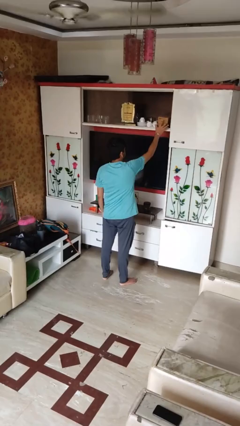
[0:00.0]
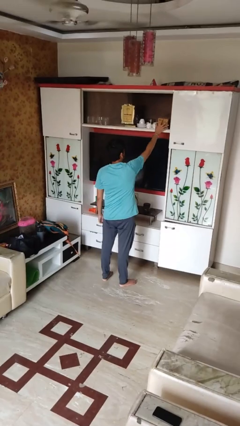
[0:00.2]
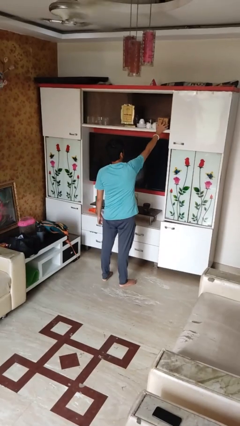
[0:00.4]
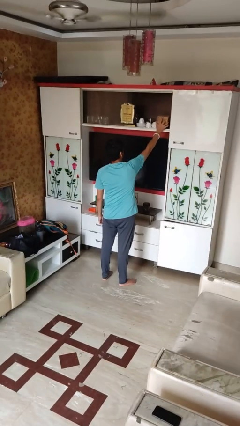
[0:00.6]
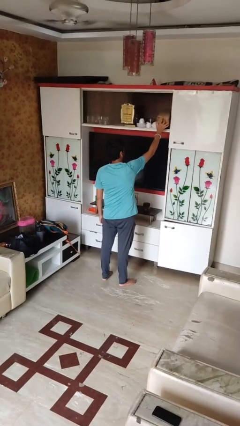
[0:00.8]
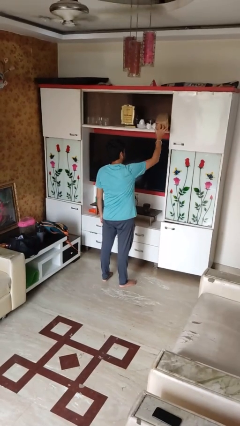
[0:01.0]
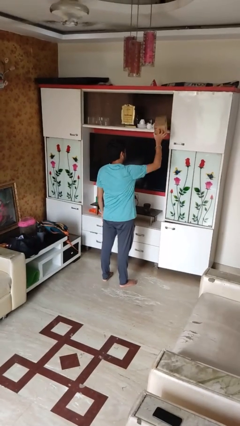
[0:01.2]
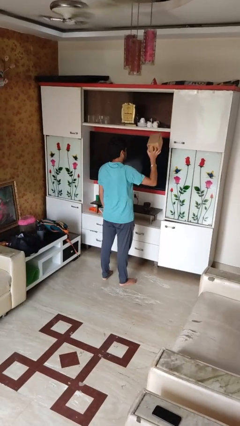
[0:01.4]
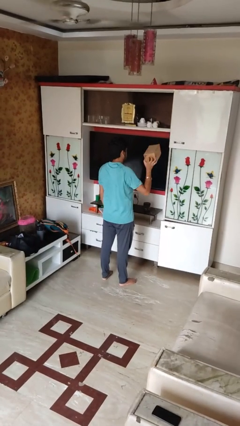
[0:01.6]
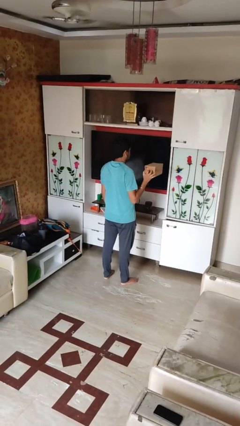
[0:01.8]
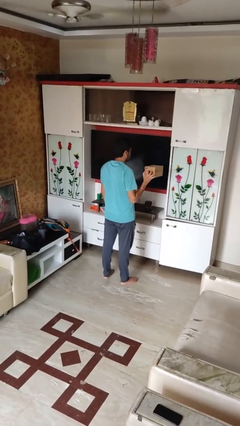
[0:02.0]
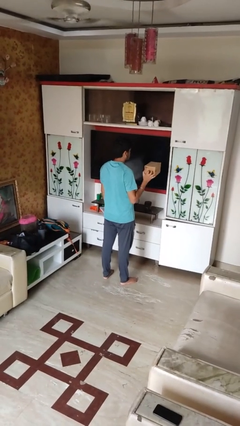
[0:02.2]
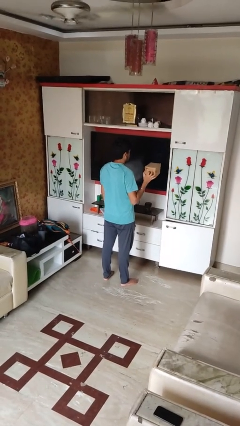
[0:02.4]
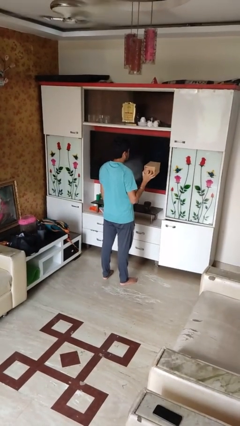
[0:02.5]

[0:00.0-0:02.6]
person picks up object from shelf

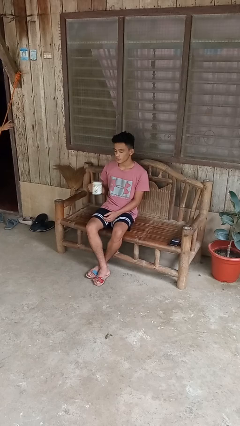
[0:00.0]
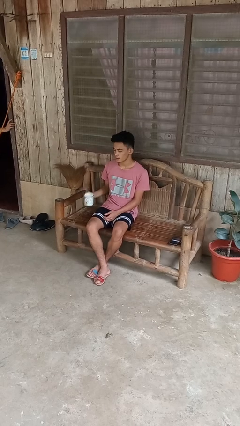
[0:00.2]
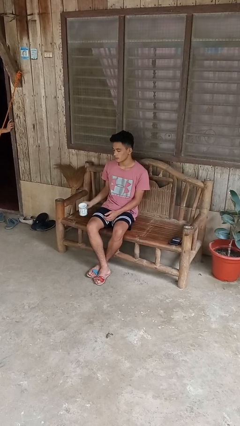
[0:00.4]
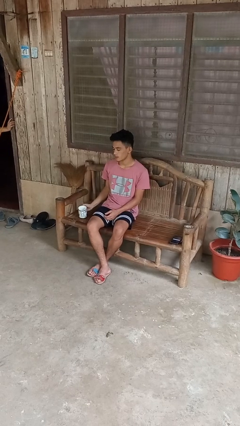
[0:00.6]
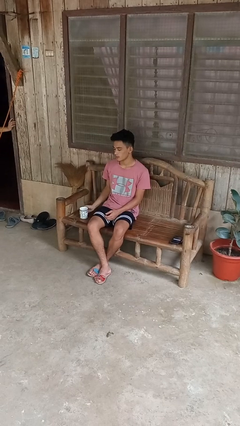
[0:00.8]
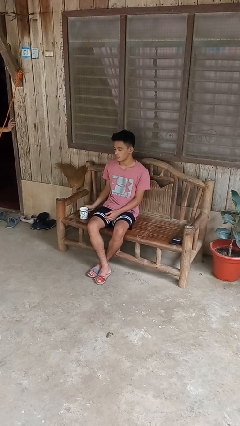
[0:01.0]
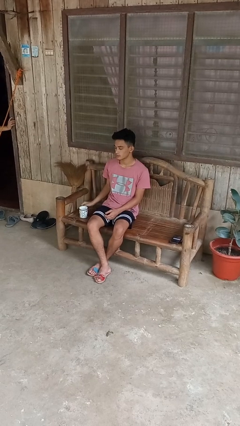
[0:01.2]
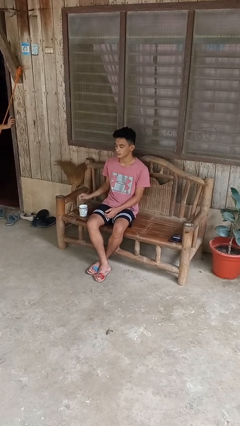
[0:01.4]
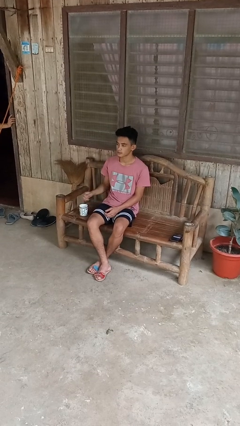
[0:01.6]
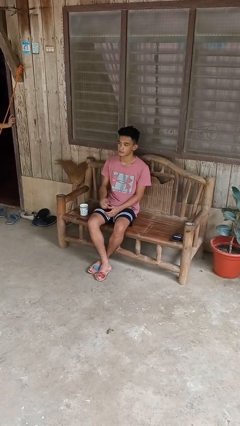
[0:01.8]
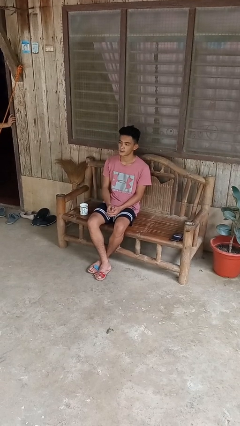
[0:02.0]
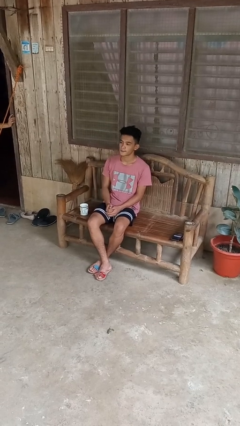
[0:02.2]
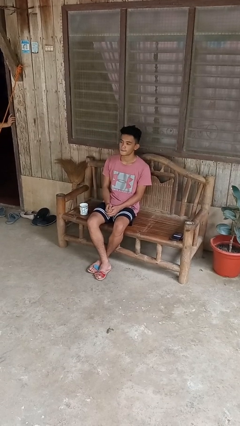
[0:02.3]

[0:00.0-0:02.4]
person puts down object on table

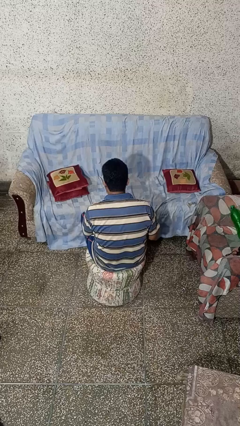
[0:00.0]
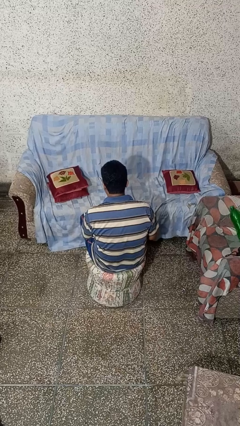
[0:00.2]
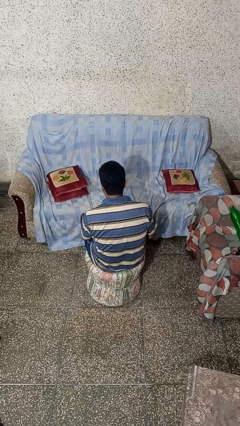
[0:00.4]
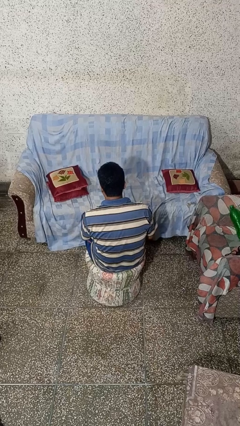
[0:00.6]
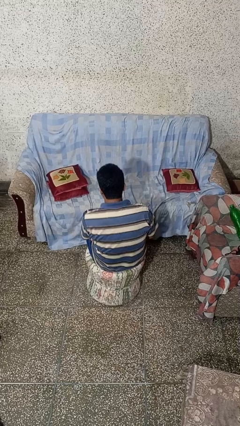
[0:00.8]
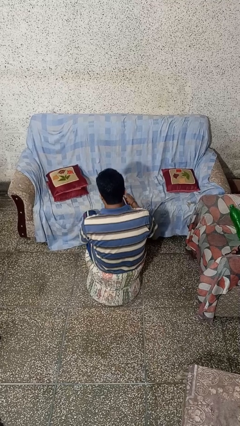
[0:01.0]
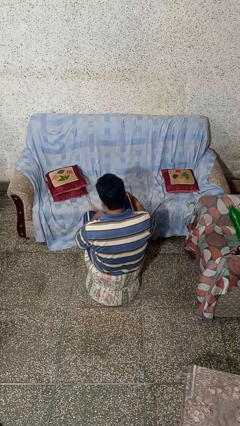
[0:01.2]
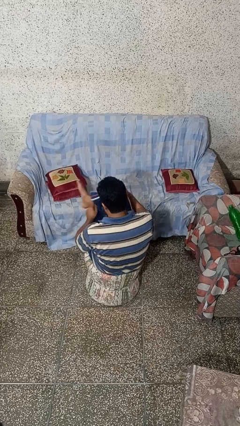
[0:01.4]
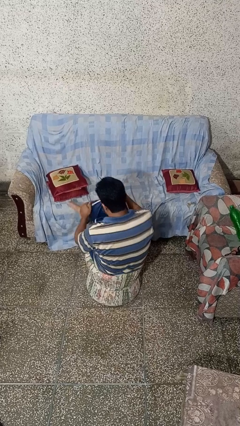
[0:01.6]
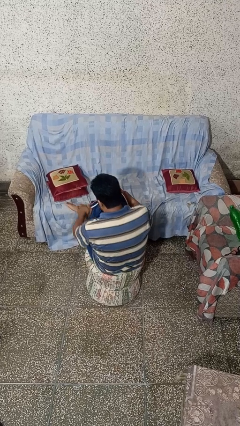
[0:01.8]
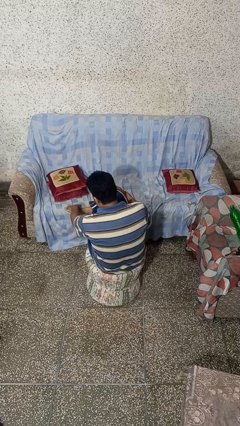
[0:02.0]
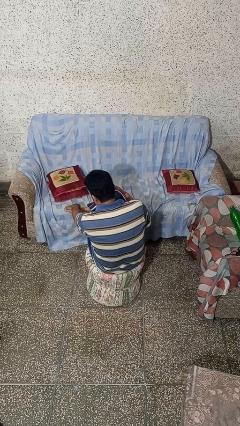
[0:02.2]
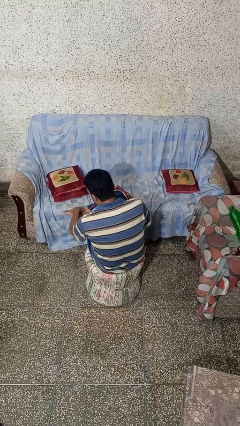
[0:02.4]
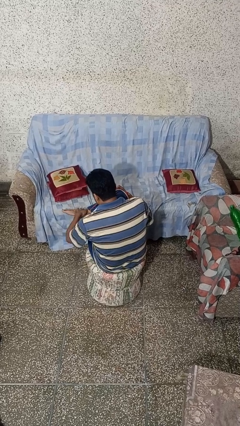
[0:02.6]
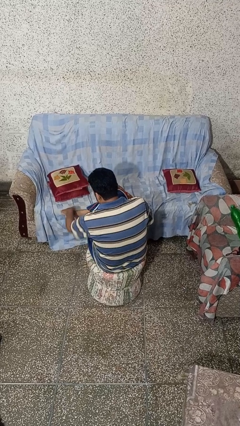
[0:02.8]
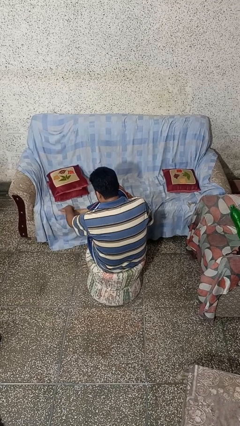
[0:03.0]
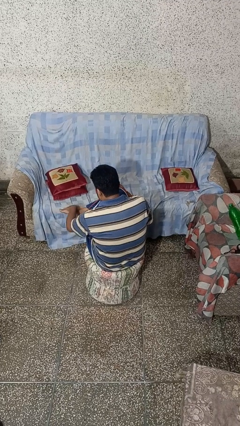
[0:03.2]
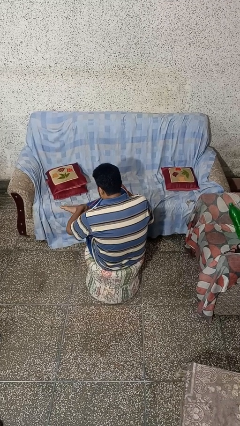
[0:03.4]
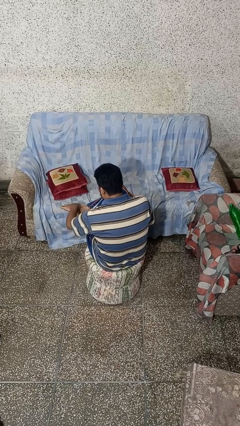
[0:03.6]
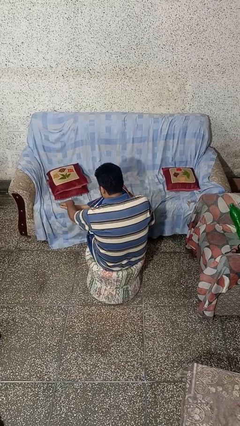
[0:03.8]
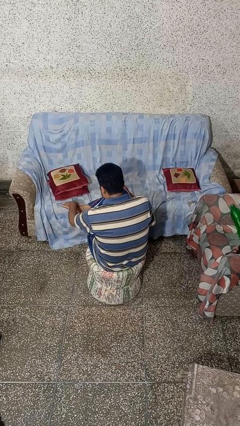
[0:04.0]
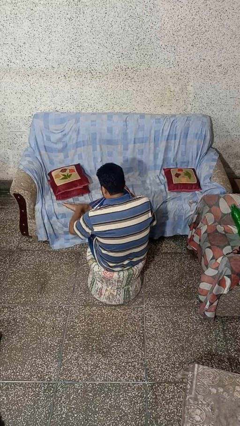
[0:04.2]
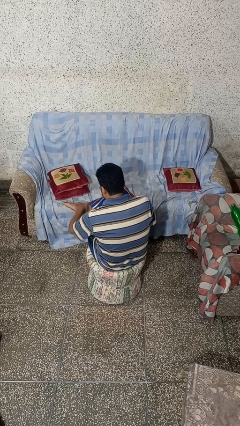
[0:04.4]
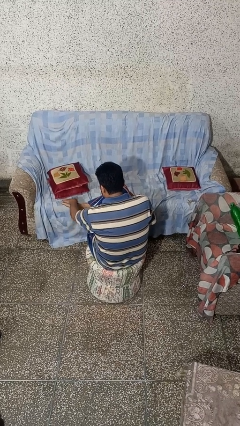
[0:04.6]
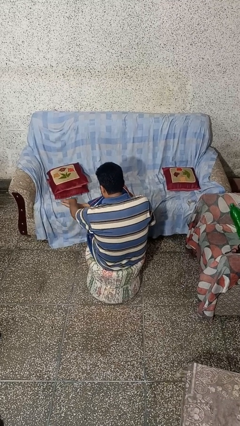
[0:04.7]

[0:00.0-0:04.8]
person rubs foot

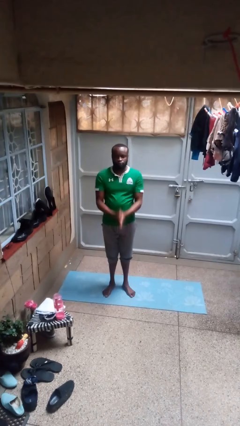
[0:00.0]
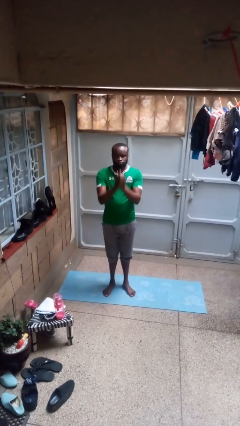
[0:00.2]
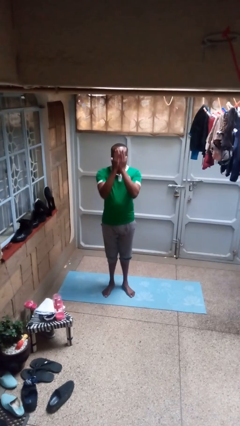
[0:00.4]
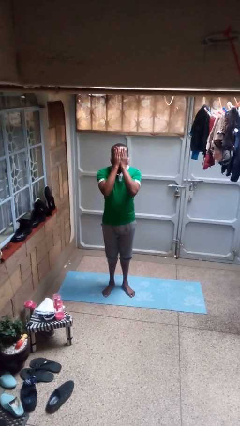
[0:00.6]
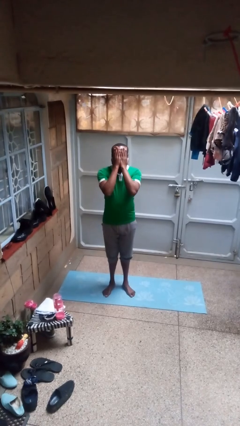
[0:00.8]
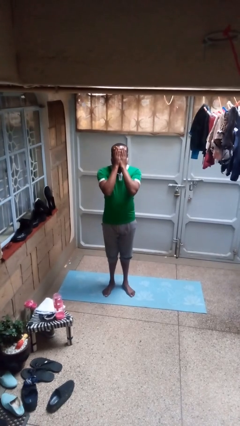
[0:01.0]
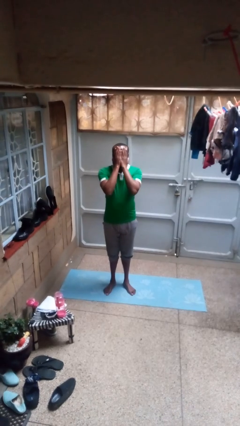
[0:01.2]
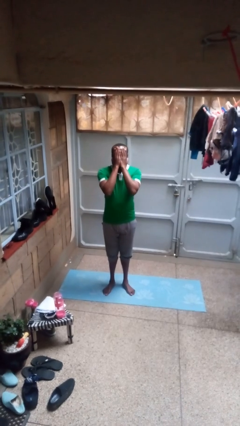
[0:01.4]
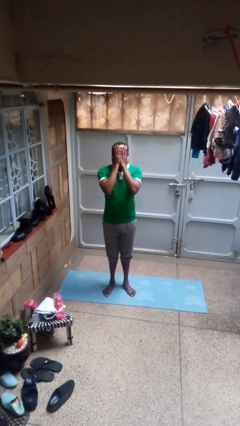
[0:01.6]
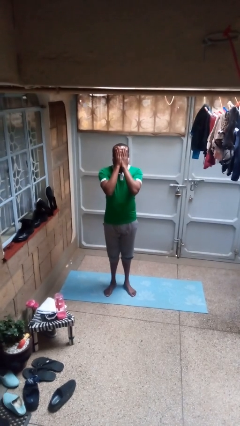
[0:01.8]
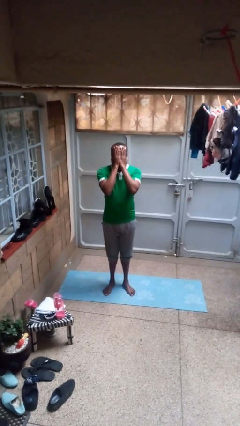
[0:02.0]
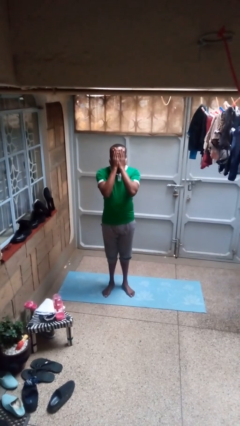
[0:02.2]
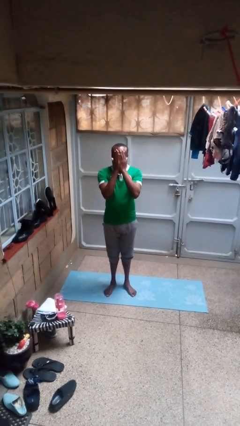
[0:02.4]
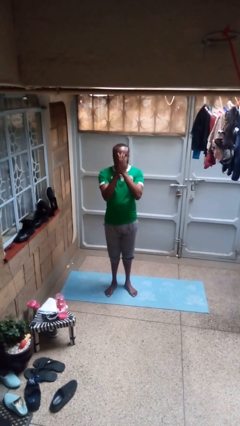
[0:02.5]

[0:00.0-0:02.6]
person covers face with hands

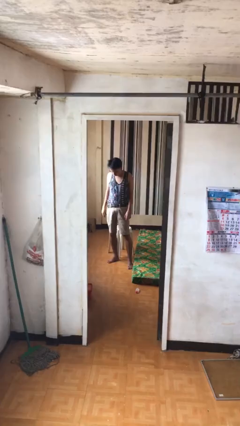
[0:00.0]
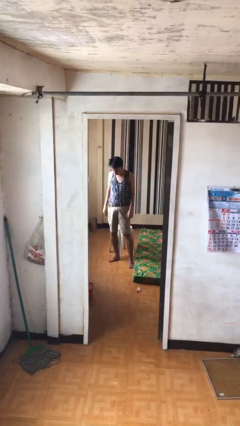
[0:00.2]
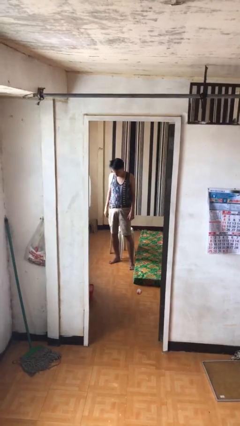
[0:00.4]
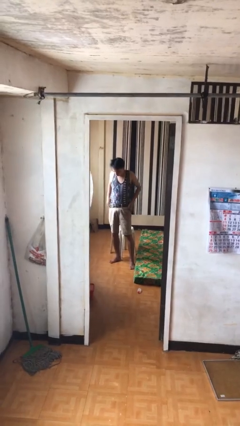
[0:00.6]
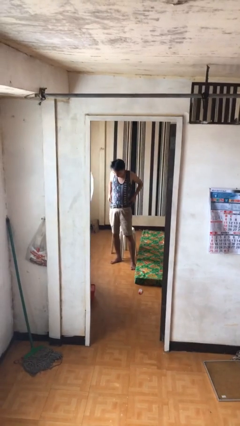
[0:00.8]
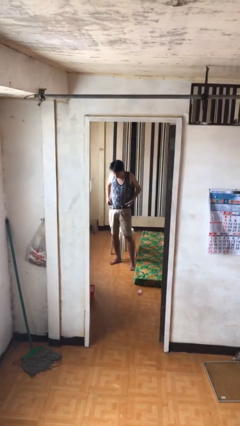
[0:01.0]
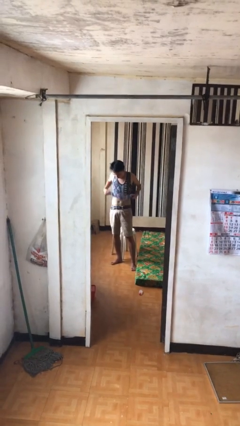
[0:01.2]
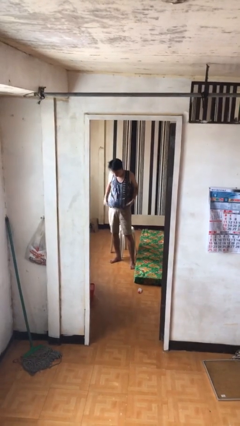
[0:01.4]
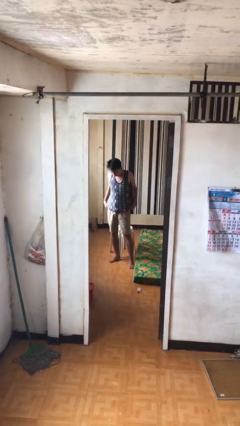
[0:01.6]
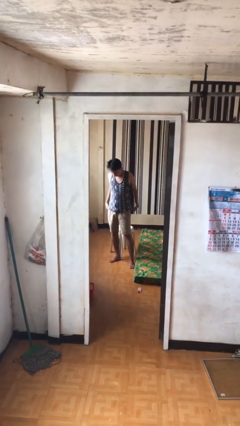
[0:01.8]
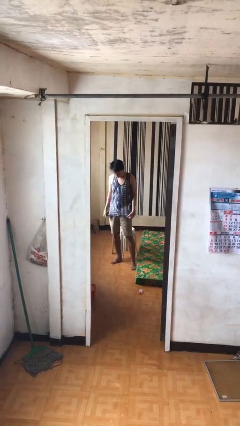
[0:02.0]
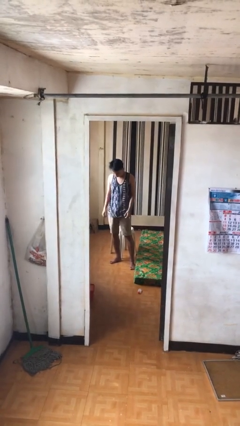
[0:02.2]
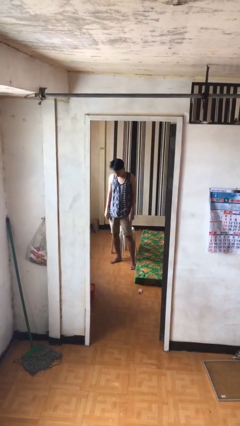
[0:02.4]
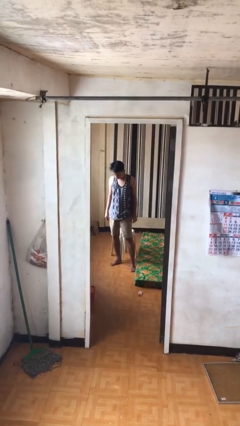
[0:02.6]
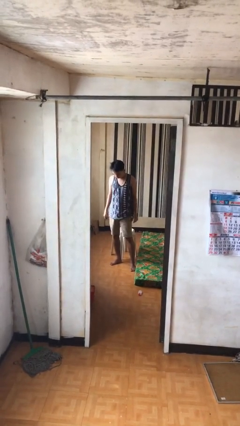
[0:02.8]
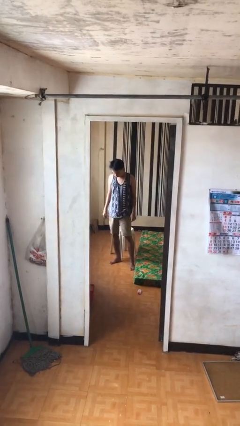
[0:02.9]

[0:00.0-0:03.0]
person untucks shirt

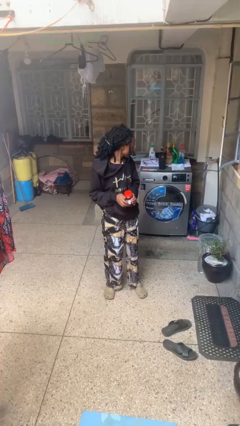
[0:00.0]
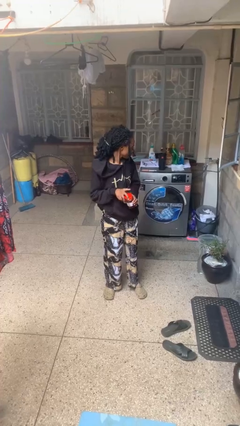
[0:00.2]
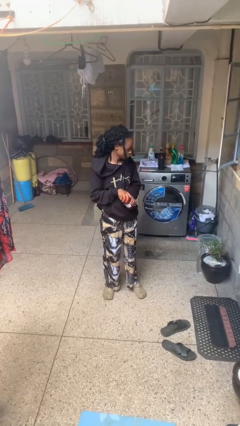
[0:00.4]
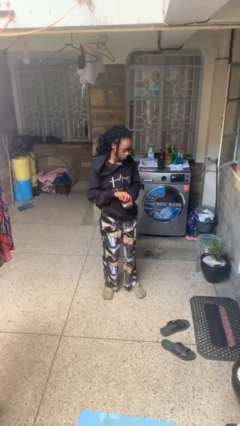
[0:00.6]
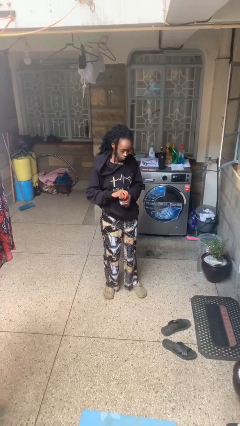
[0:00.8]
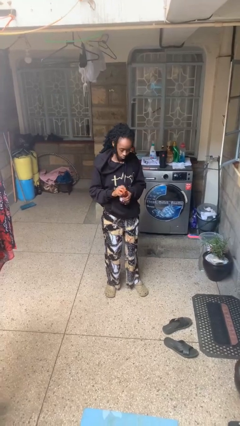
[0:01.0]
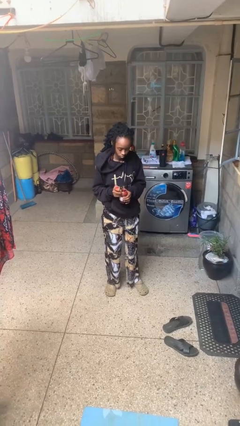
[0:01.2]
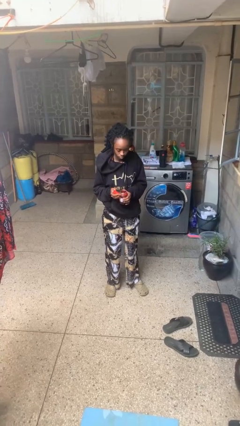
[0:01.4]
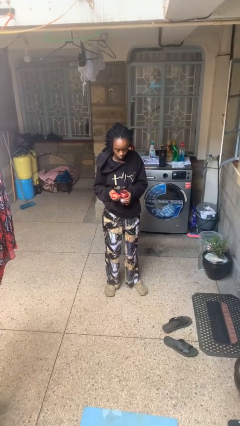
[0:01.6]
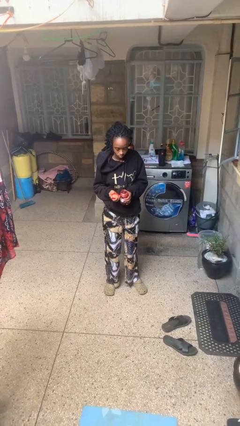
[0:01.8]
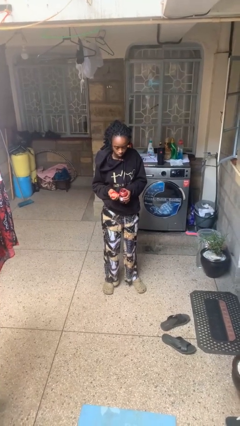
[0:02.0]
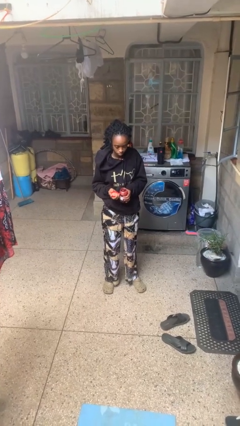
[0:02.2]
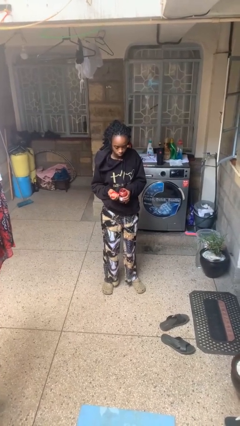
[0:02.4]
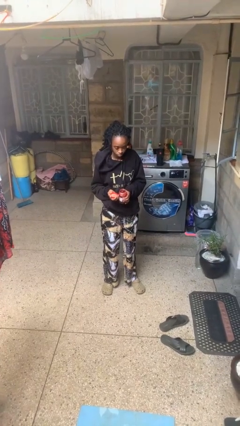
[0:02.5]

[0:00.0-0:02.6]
person opens jar
